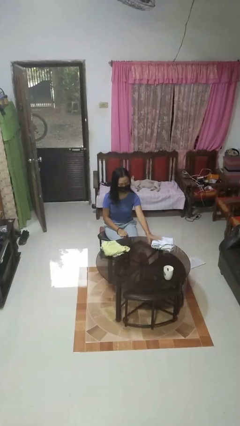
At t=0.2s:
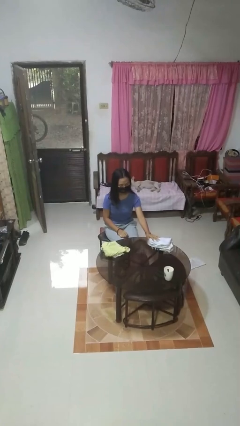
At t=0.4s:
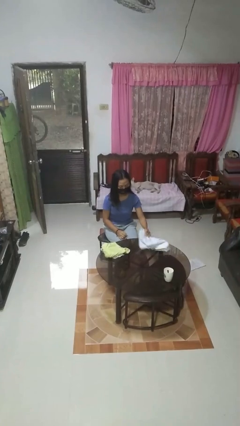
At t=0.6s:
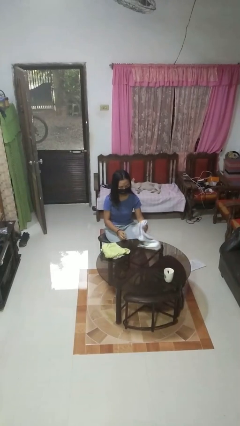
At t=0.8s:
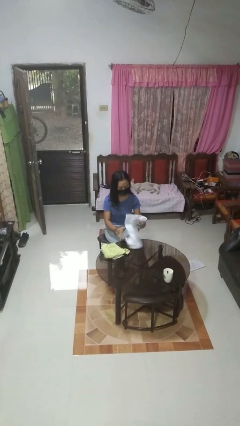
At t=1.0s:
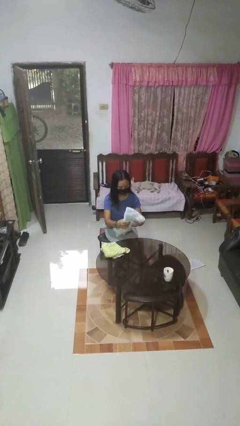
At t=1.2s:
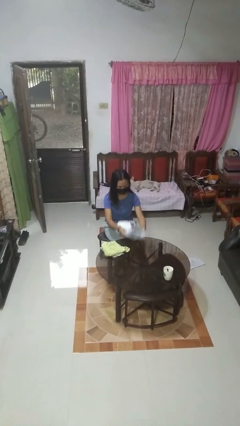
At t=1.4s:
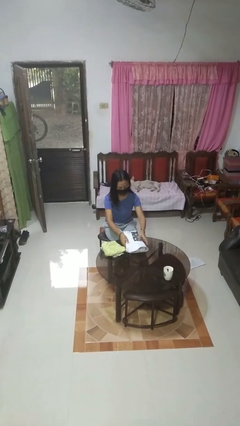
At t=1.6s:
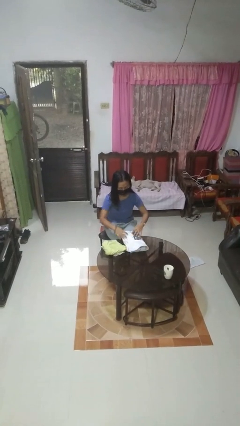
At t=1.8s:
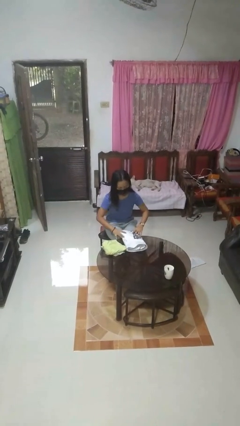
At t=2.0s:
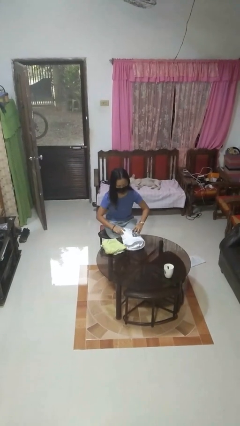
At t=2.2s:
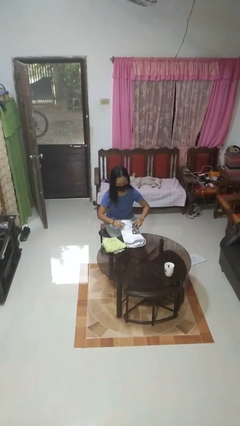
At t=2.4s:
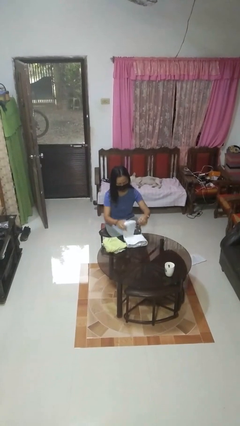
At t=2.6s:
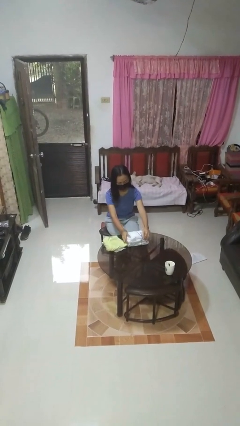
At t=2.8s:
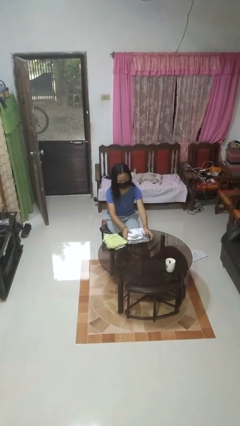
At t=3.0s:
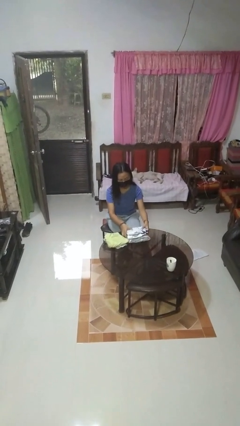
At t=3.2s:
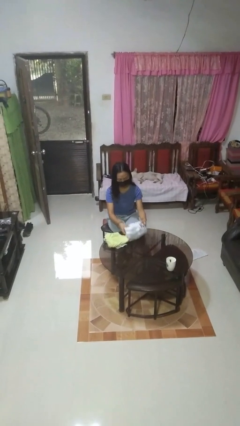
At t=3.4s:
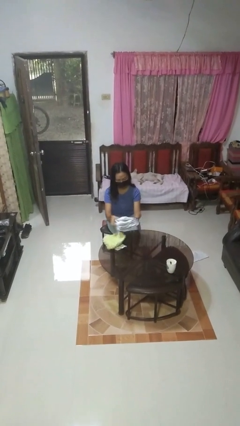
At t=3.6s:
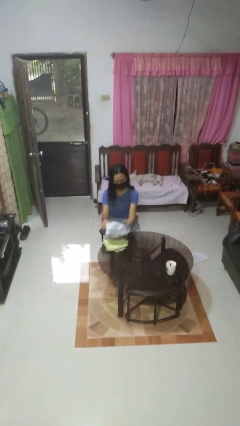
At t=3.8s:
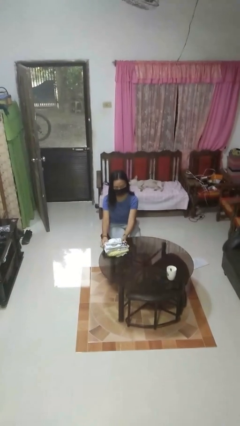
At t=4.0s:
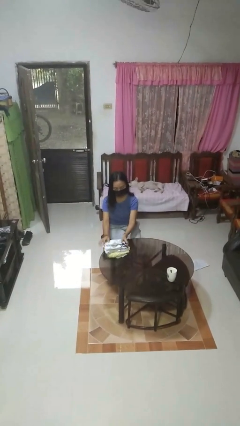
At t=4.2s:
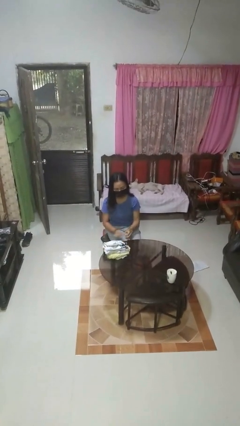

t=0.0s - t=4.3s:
person folds towel

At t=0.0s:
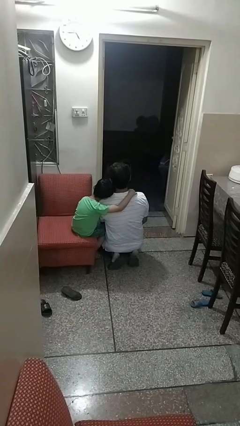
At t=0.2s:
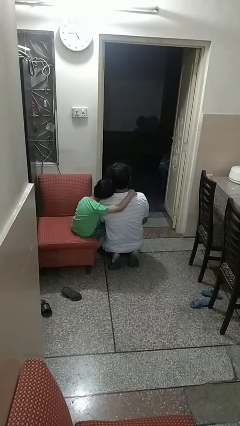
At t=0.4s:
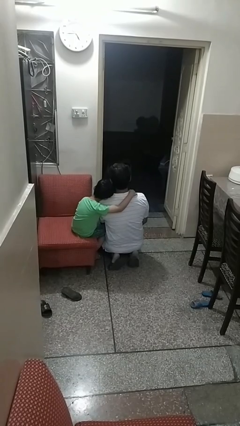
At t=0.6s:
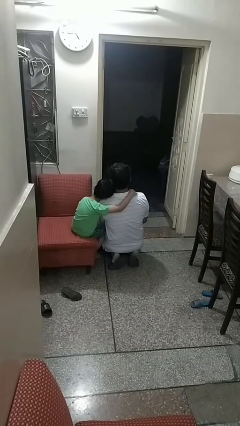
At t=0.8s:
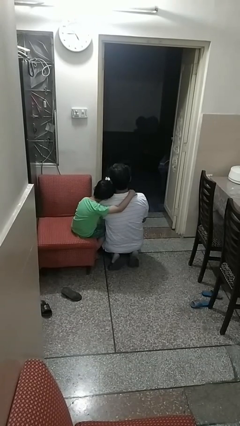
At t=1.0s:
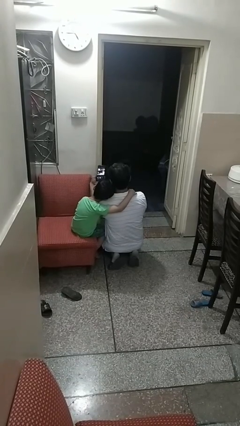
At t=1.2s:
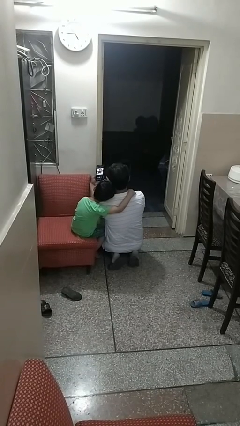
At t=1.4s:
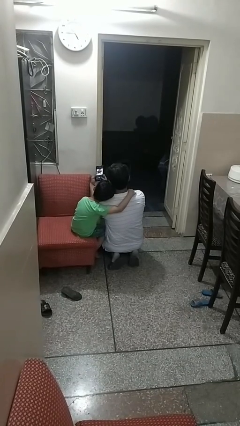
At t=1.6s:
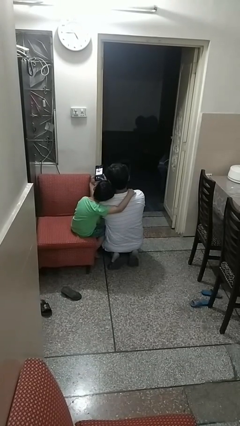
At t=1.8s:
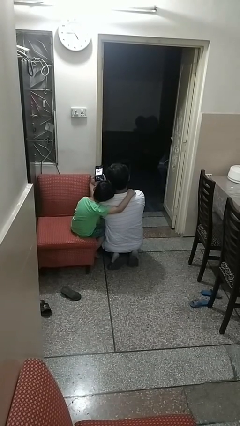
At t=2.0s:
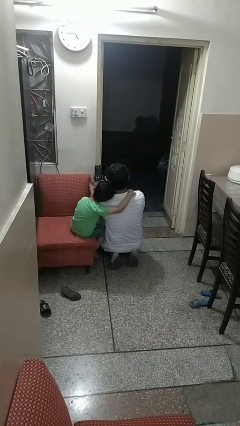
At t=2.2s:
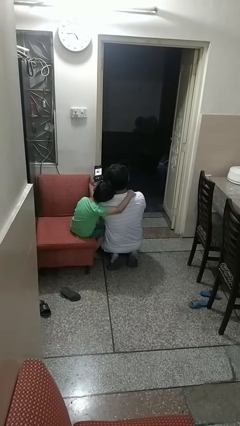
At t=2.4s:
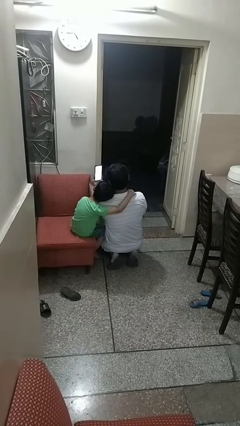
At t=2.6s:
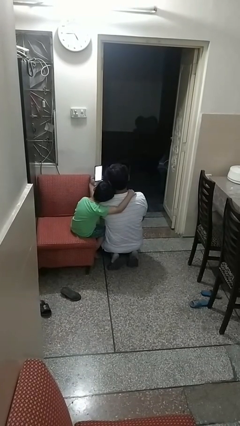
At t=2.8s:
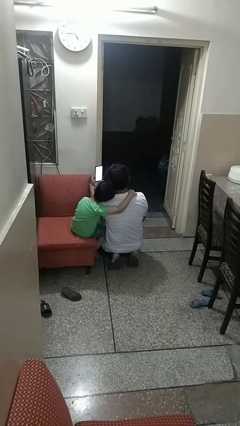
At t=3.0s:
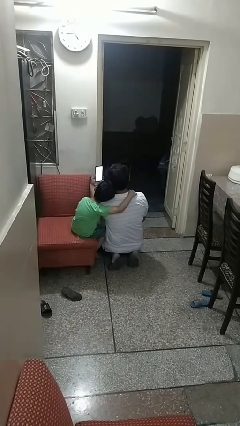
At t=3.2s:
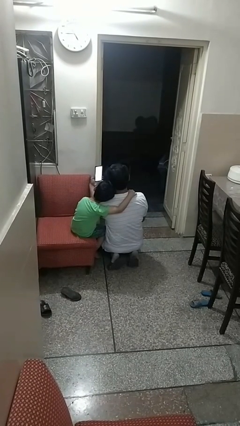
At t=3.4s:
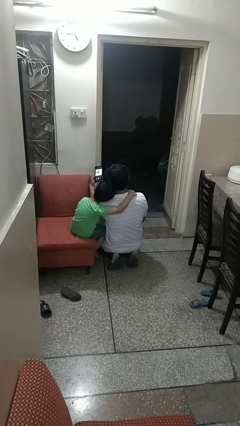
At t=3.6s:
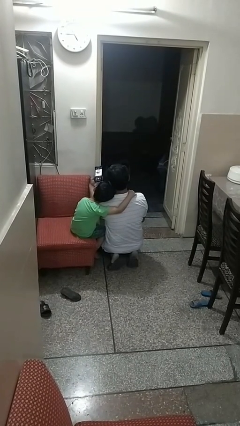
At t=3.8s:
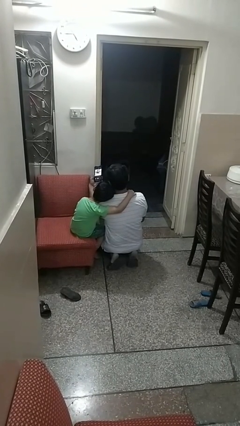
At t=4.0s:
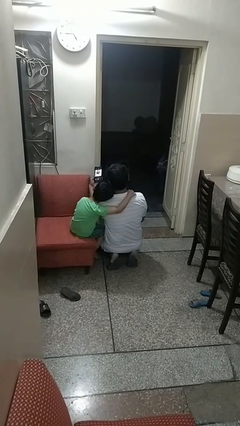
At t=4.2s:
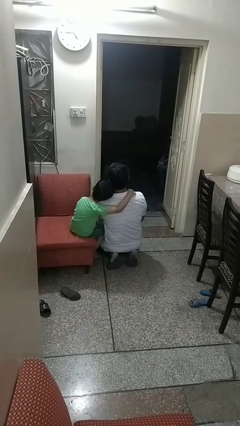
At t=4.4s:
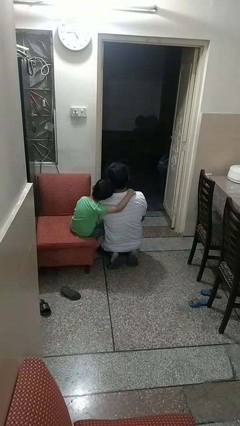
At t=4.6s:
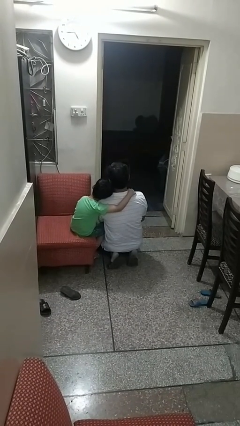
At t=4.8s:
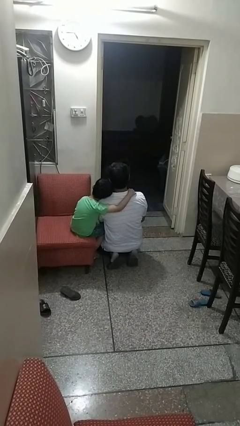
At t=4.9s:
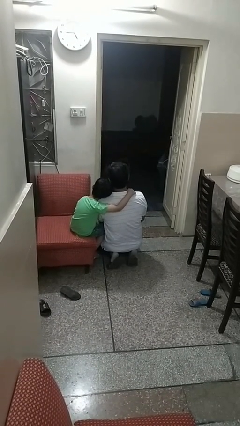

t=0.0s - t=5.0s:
person takes selfie with person

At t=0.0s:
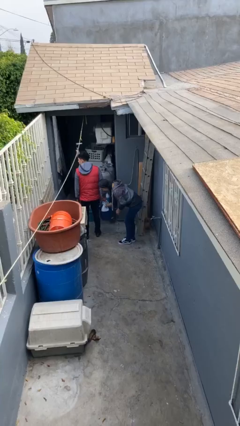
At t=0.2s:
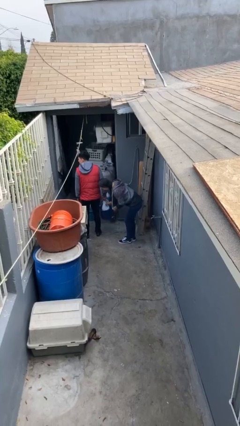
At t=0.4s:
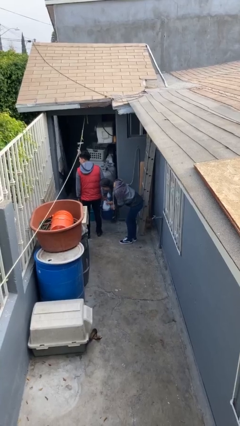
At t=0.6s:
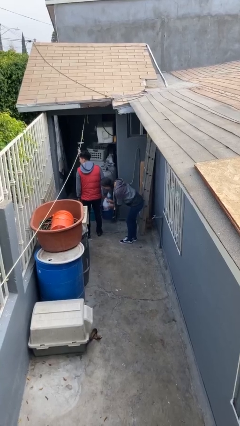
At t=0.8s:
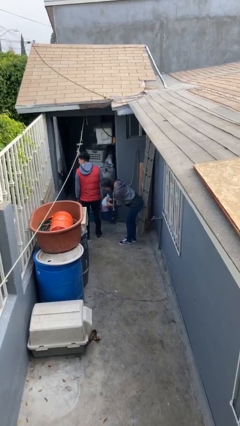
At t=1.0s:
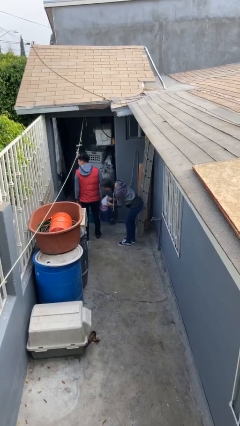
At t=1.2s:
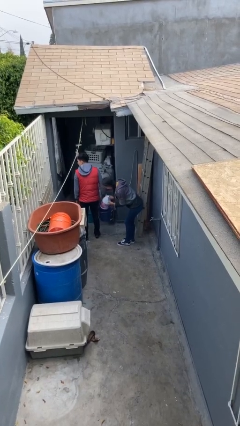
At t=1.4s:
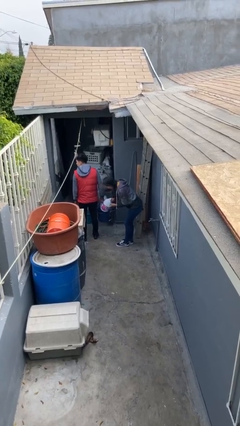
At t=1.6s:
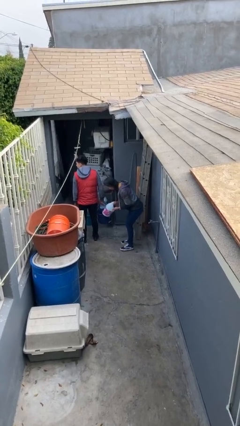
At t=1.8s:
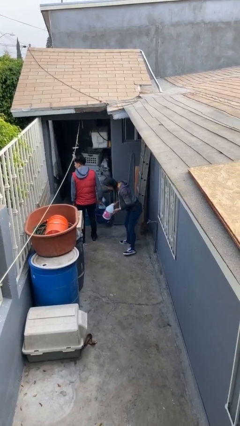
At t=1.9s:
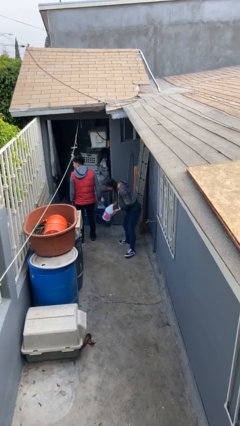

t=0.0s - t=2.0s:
person steals object from person

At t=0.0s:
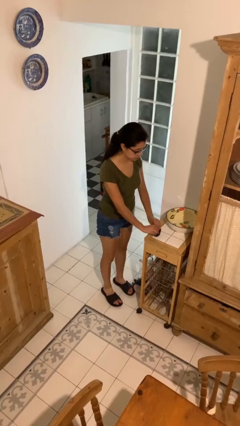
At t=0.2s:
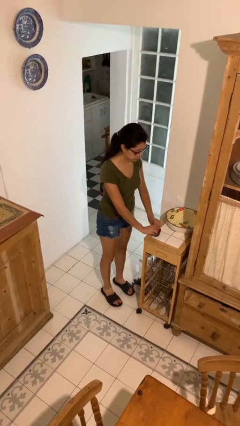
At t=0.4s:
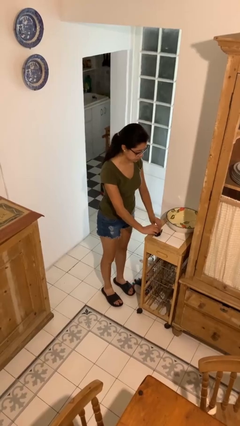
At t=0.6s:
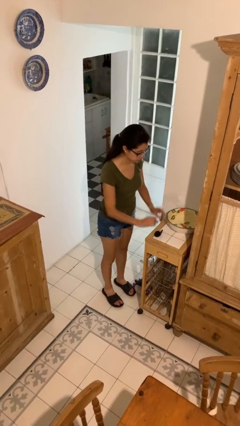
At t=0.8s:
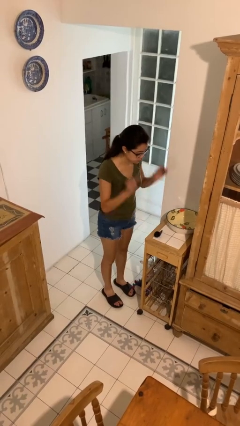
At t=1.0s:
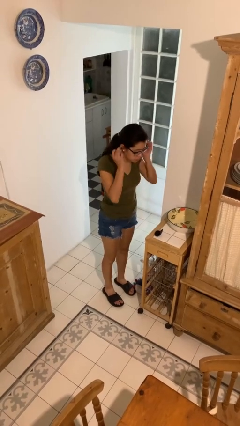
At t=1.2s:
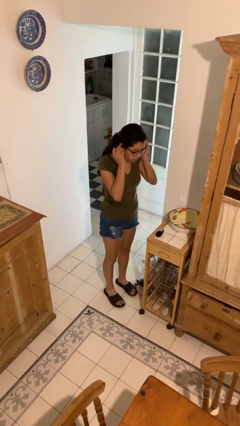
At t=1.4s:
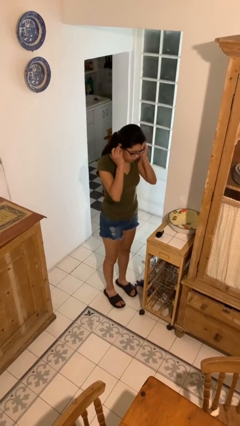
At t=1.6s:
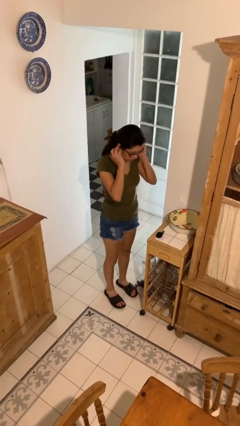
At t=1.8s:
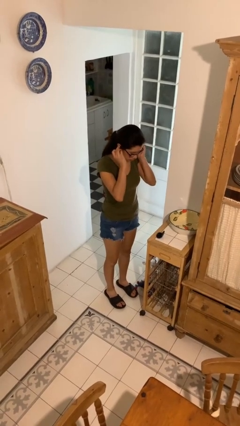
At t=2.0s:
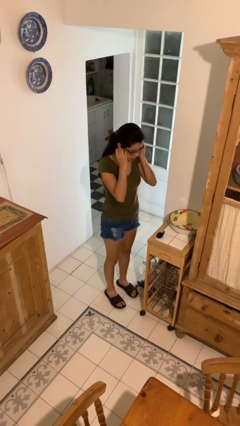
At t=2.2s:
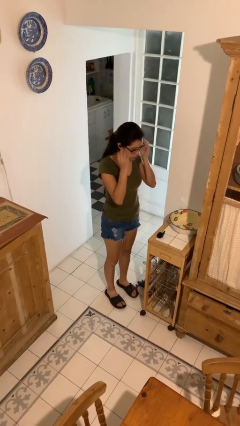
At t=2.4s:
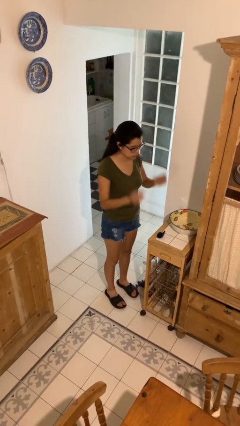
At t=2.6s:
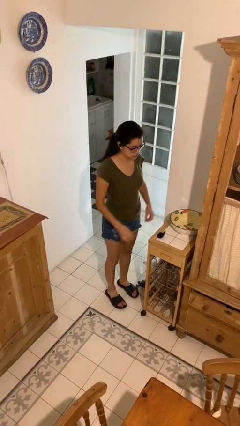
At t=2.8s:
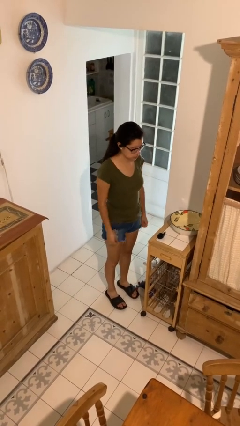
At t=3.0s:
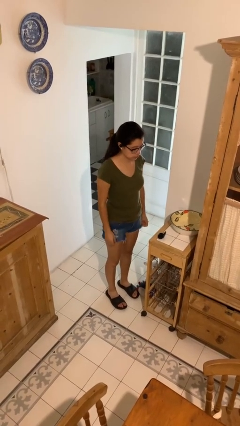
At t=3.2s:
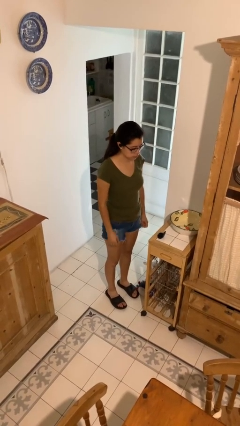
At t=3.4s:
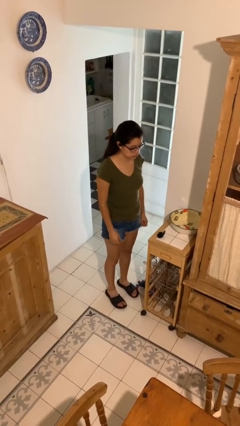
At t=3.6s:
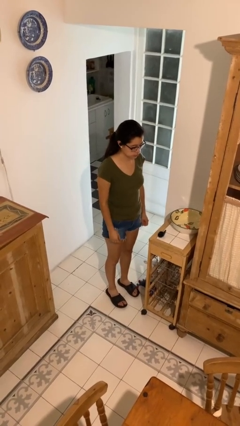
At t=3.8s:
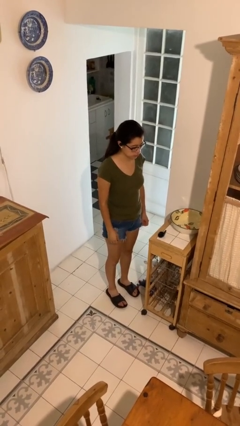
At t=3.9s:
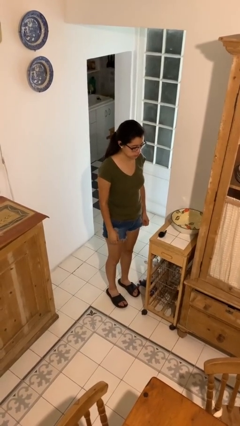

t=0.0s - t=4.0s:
person puts on headphones

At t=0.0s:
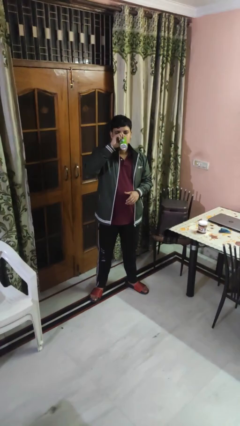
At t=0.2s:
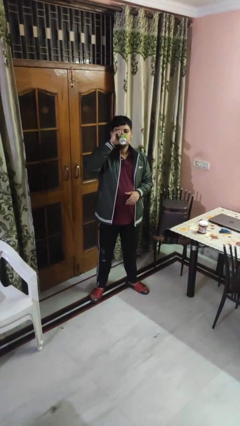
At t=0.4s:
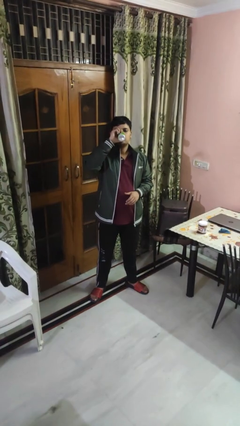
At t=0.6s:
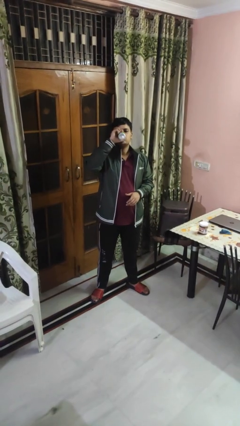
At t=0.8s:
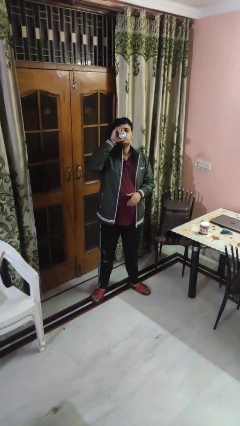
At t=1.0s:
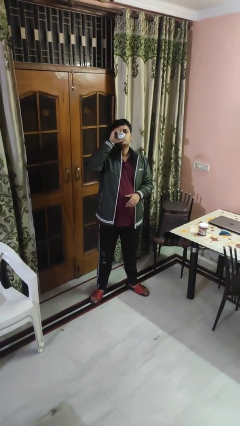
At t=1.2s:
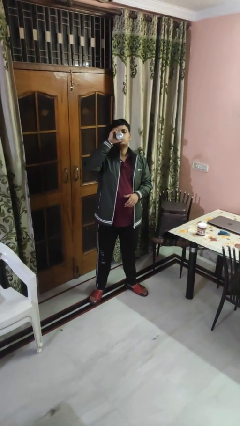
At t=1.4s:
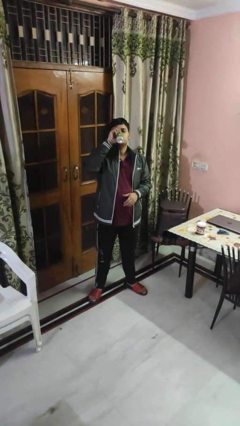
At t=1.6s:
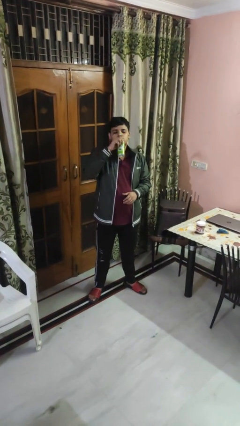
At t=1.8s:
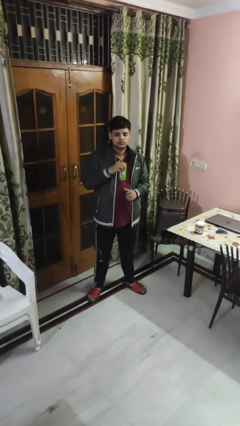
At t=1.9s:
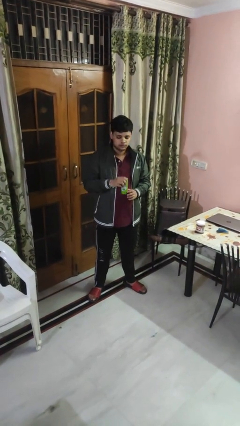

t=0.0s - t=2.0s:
person drinks from beverage can

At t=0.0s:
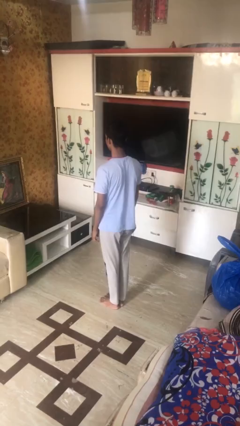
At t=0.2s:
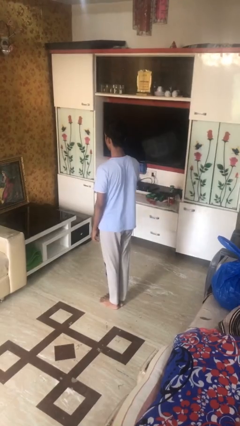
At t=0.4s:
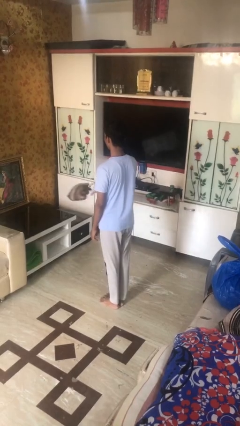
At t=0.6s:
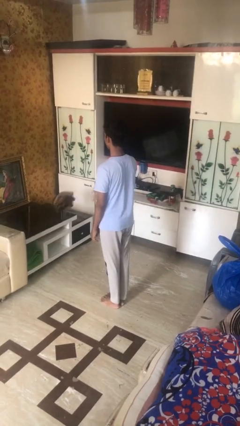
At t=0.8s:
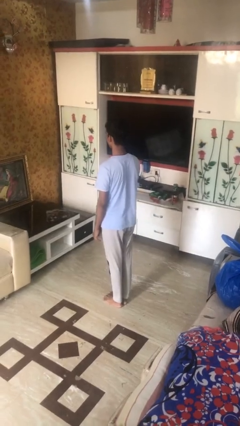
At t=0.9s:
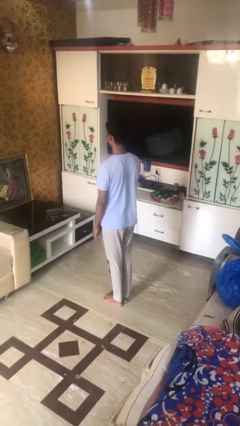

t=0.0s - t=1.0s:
person throws object on table
